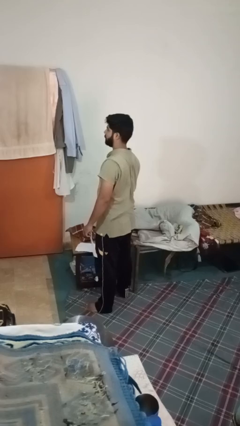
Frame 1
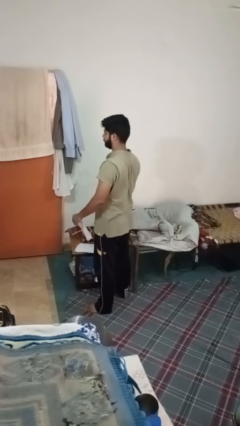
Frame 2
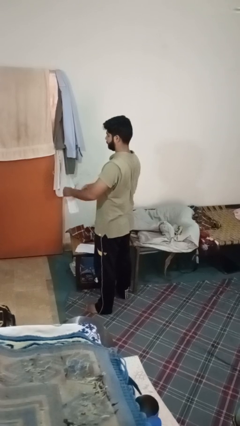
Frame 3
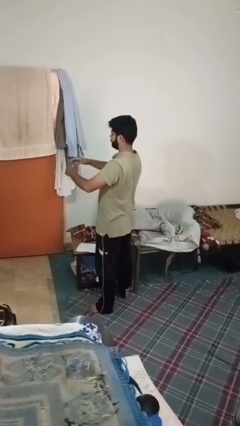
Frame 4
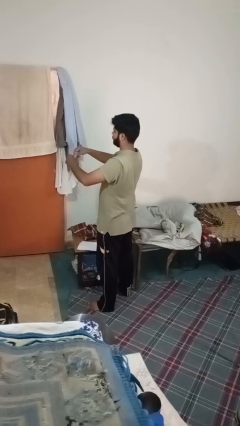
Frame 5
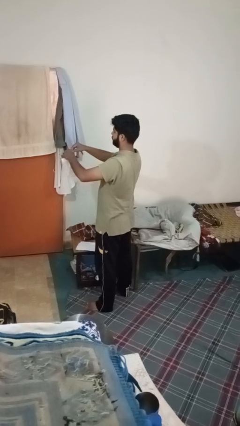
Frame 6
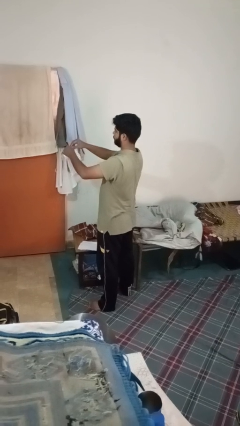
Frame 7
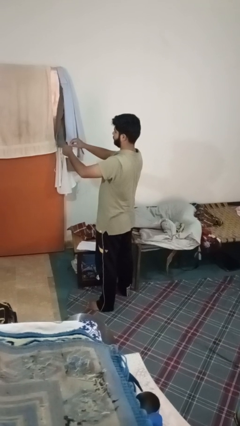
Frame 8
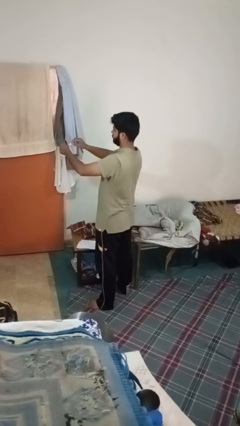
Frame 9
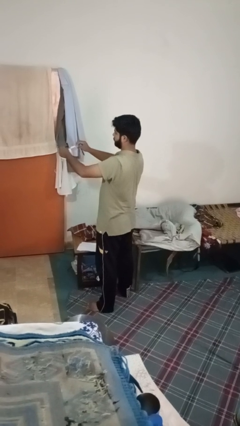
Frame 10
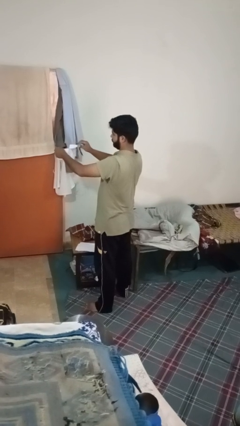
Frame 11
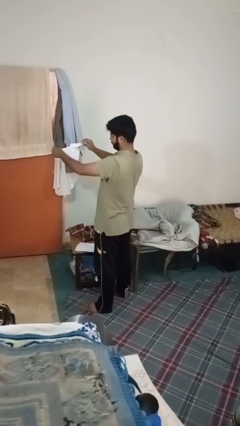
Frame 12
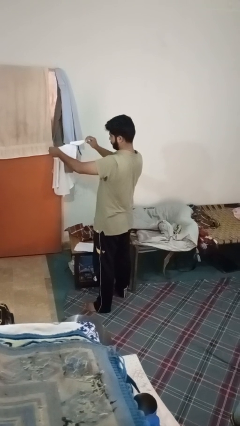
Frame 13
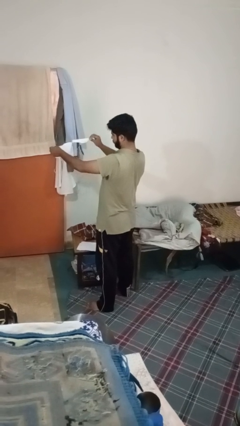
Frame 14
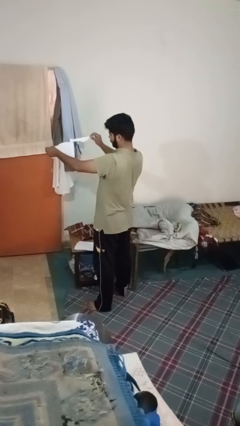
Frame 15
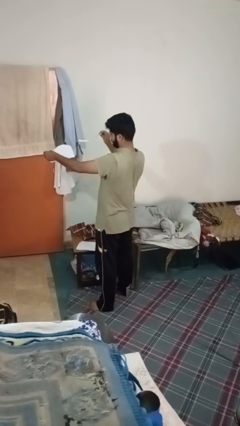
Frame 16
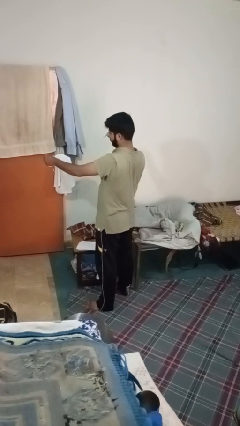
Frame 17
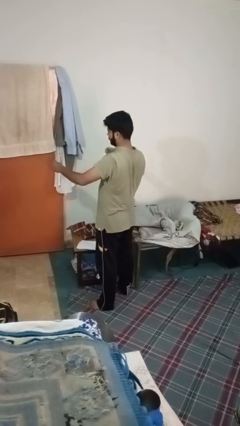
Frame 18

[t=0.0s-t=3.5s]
person tears paper

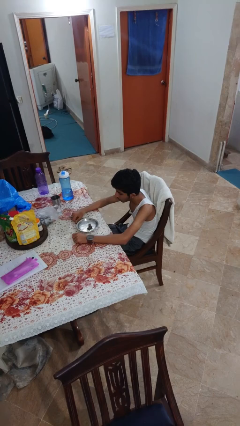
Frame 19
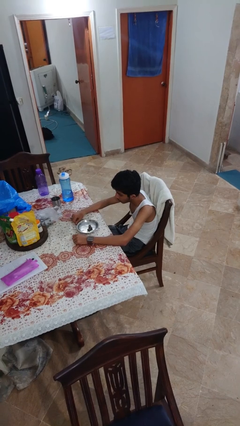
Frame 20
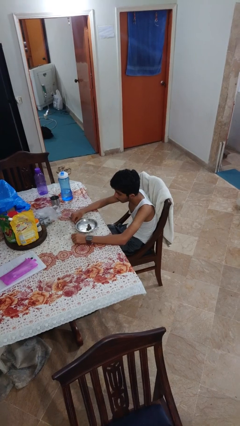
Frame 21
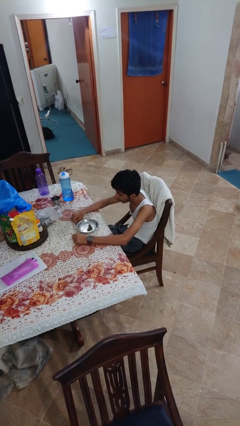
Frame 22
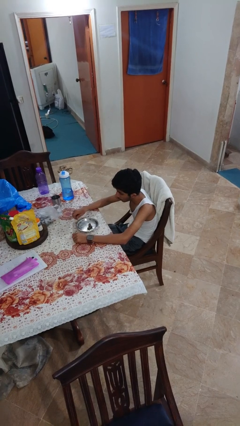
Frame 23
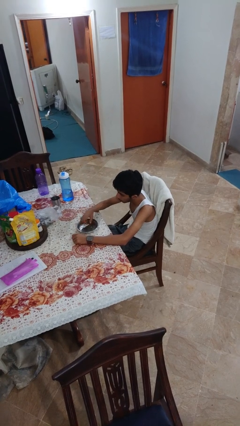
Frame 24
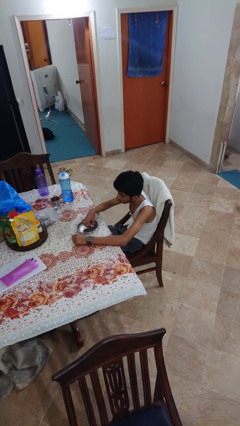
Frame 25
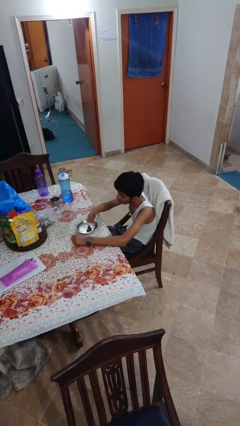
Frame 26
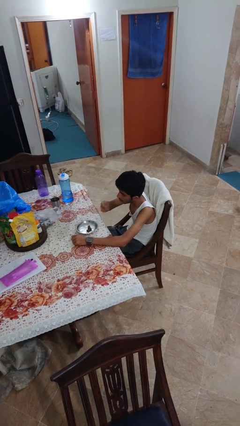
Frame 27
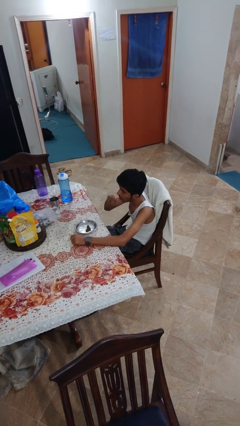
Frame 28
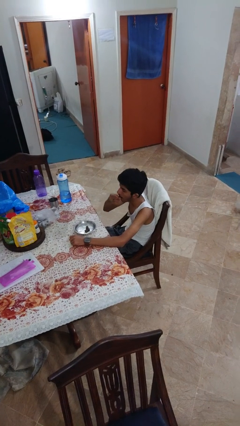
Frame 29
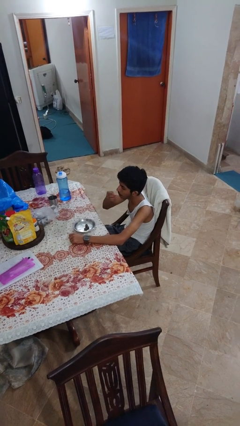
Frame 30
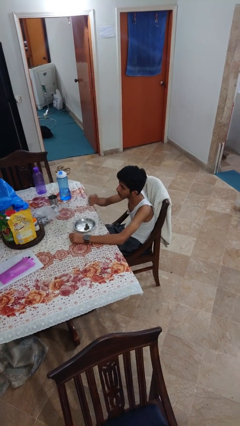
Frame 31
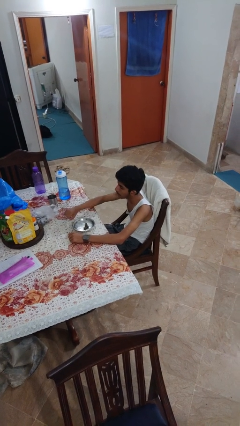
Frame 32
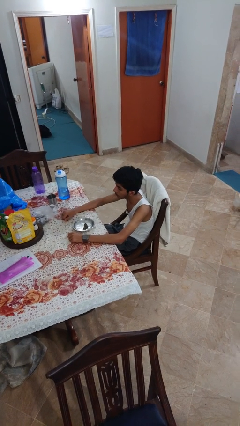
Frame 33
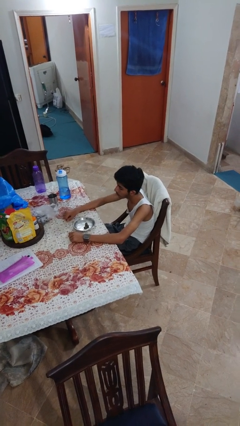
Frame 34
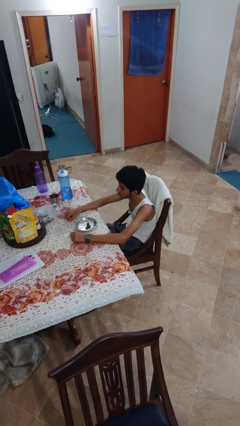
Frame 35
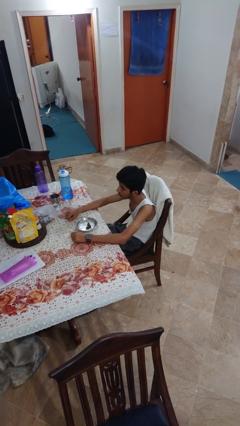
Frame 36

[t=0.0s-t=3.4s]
person eats with hands

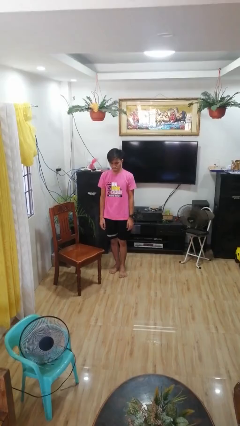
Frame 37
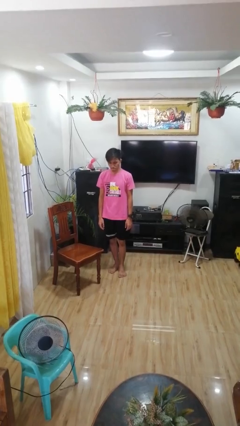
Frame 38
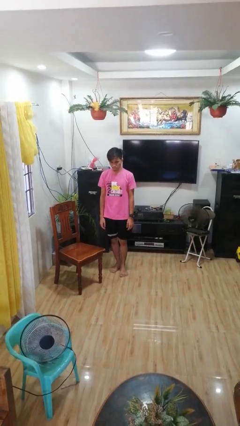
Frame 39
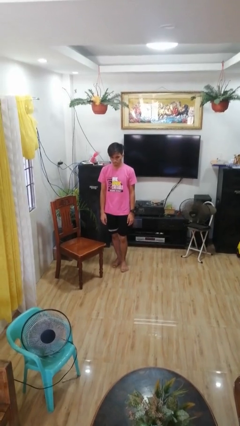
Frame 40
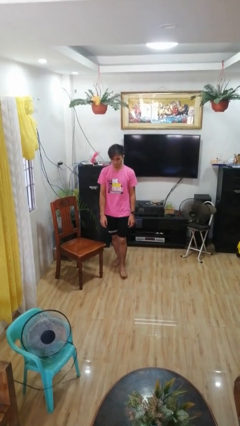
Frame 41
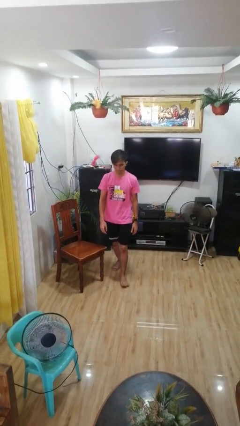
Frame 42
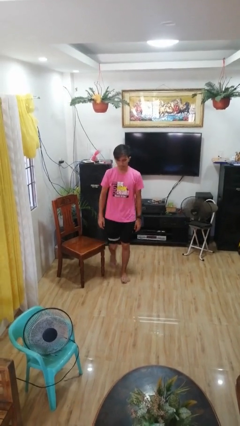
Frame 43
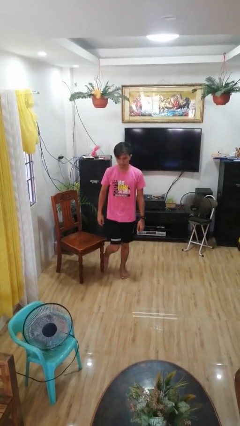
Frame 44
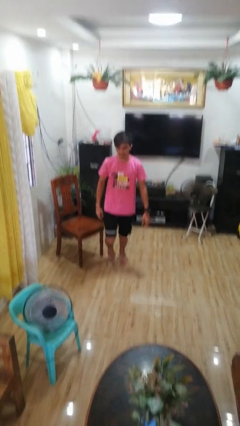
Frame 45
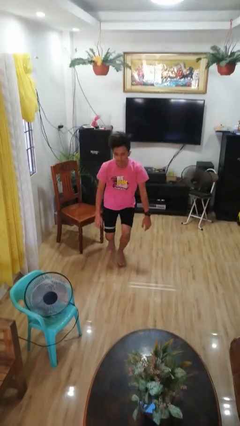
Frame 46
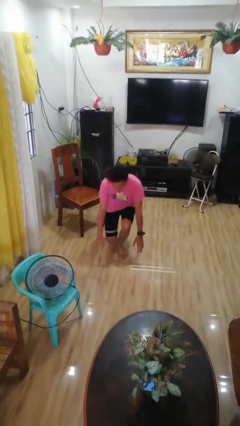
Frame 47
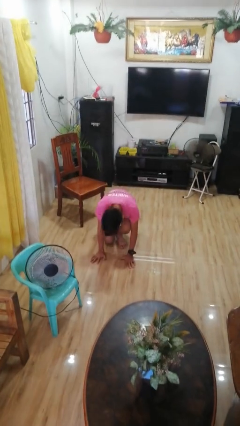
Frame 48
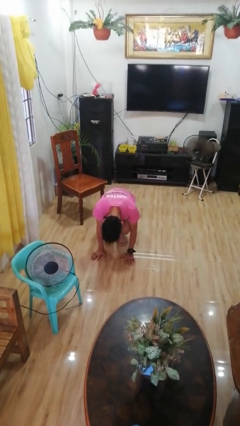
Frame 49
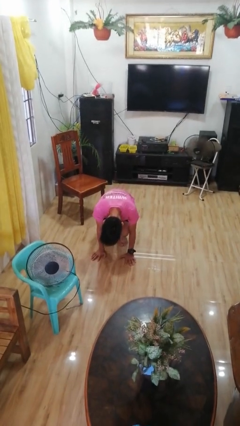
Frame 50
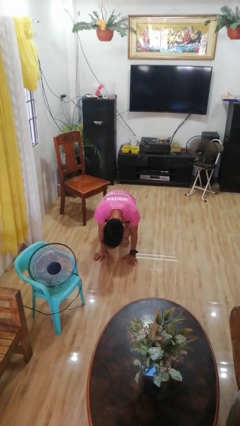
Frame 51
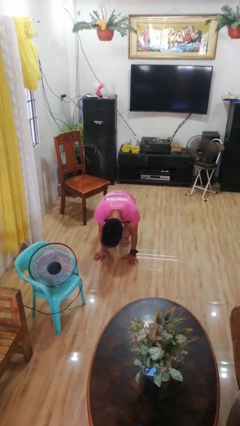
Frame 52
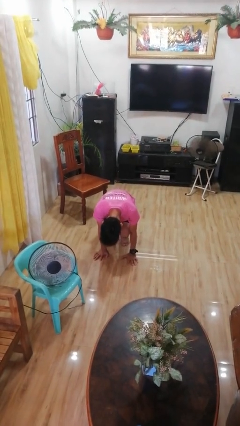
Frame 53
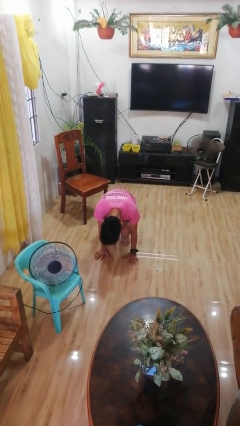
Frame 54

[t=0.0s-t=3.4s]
person trips on object on floor

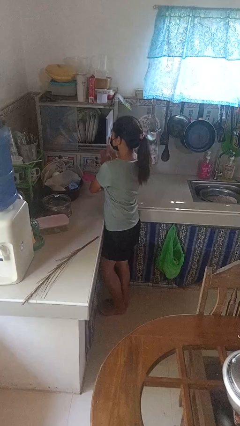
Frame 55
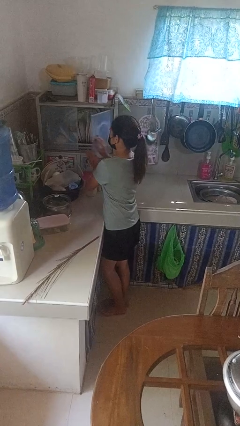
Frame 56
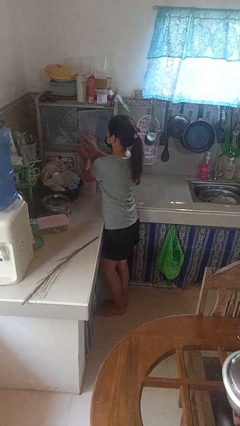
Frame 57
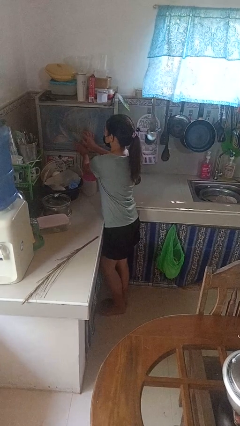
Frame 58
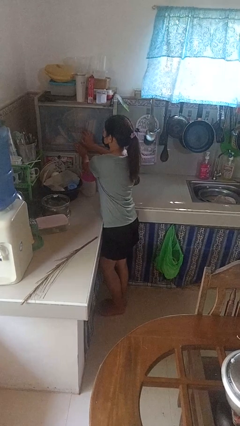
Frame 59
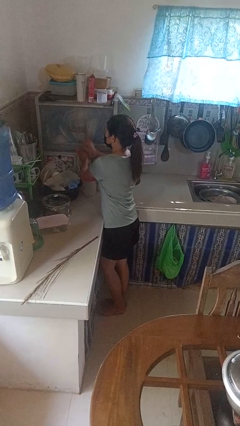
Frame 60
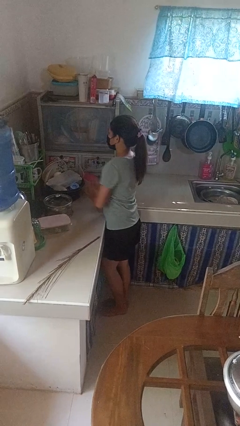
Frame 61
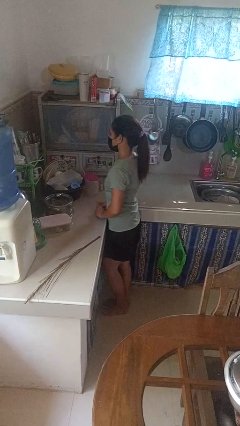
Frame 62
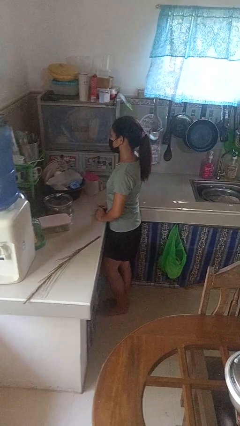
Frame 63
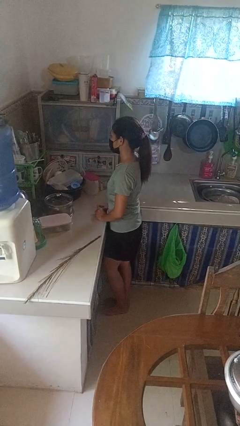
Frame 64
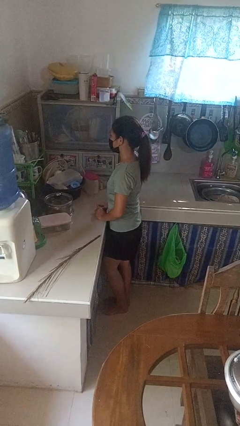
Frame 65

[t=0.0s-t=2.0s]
person closes kitchen drawer

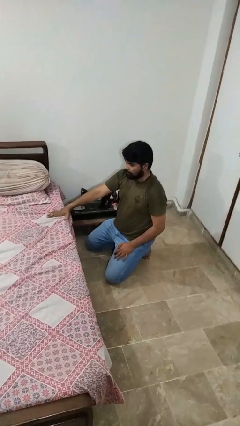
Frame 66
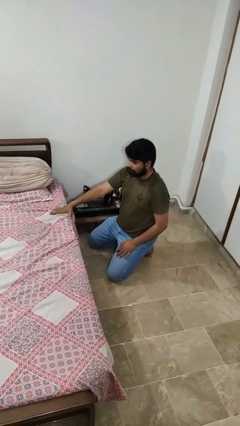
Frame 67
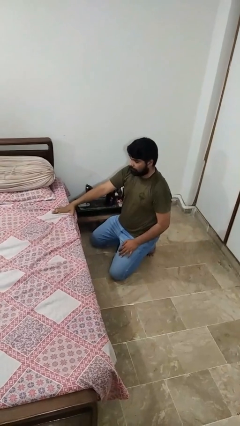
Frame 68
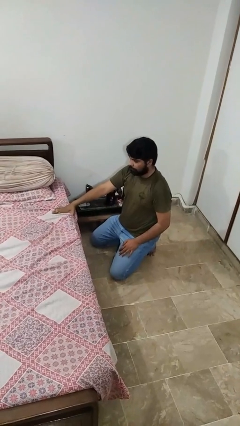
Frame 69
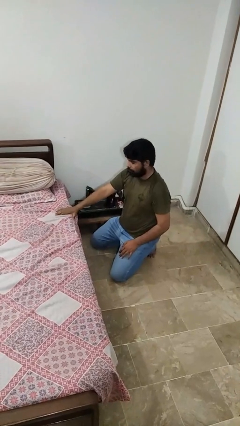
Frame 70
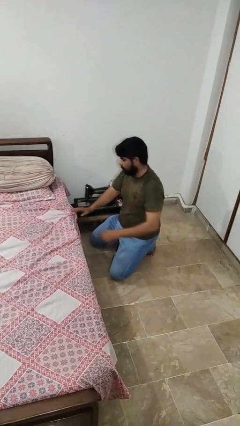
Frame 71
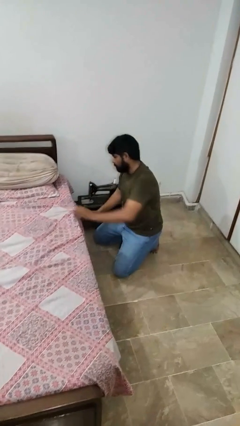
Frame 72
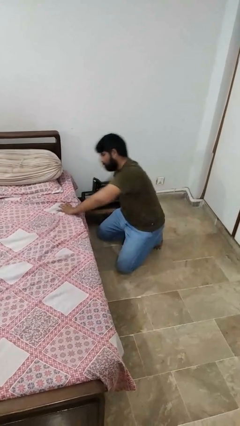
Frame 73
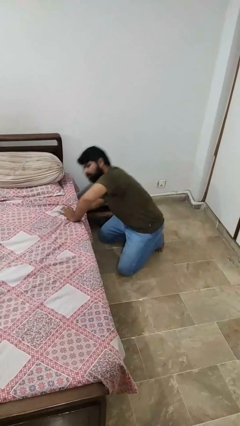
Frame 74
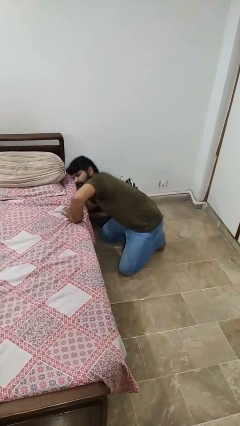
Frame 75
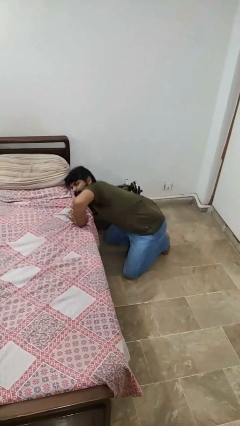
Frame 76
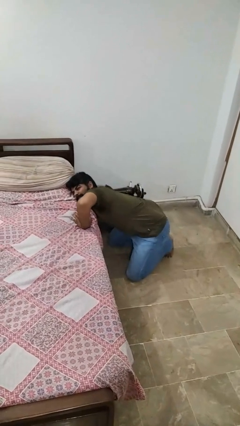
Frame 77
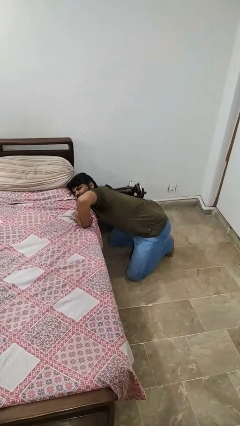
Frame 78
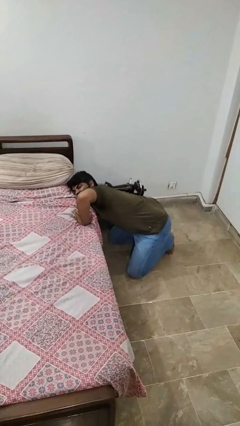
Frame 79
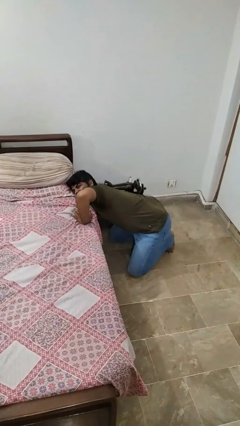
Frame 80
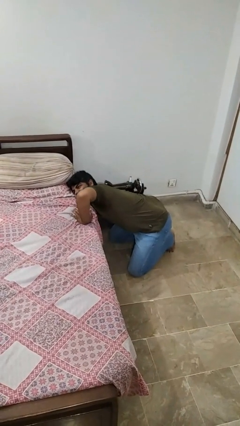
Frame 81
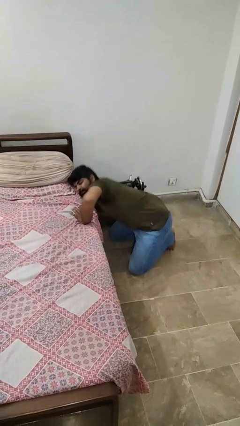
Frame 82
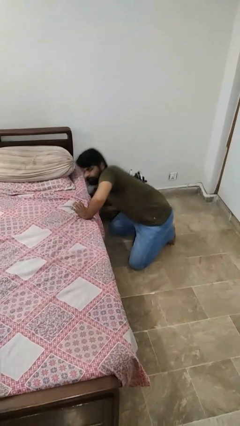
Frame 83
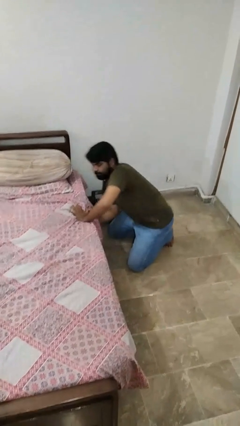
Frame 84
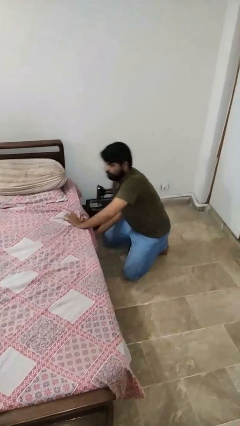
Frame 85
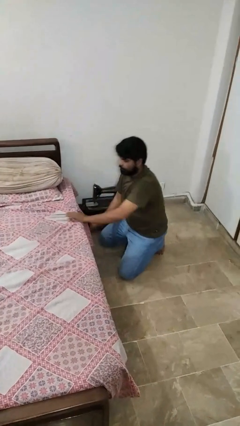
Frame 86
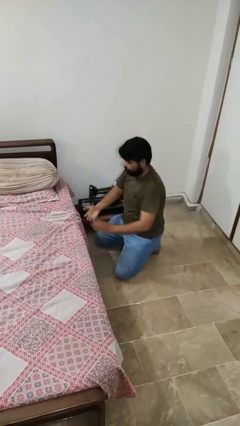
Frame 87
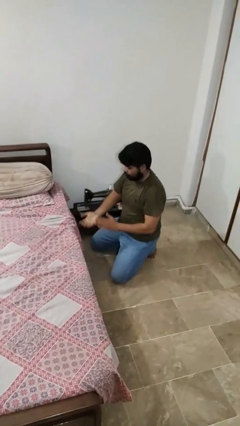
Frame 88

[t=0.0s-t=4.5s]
person searches under bed

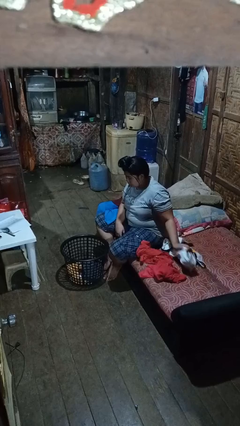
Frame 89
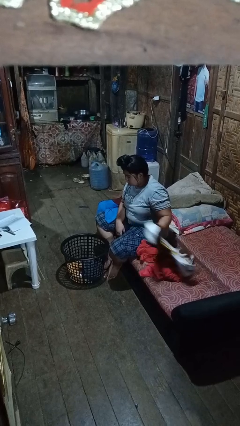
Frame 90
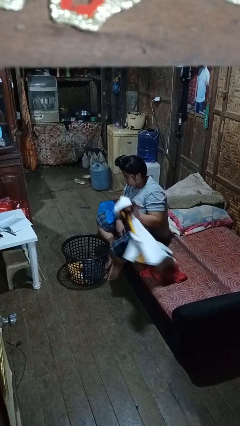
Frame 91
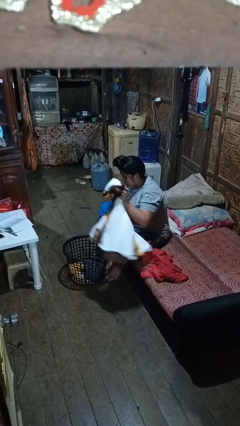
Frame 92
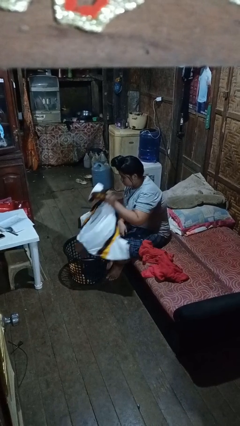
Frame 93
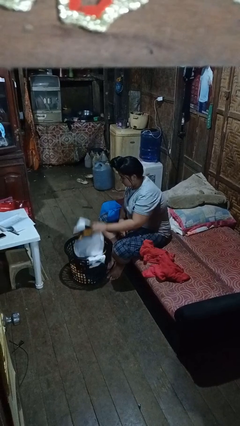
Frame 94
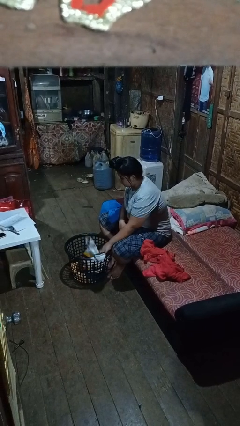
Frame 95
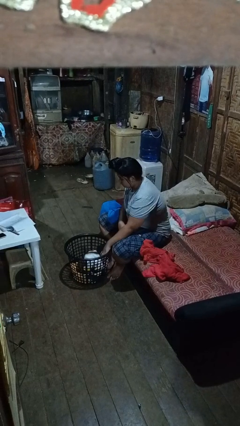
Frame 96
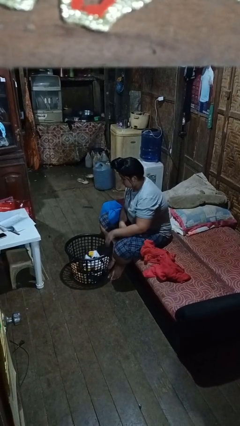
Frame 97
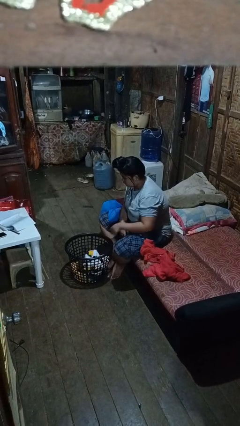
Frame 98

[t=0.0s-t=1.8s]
person puts object into basket
